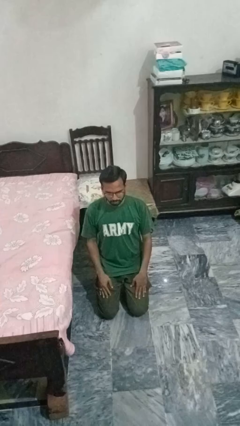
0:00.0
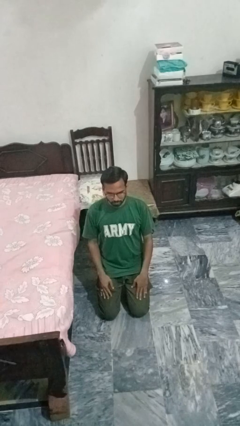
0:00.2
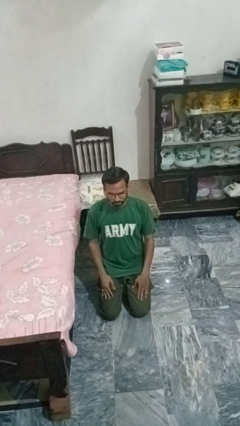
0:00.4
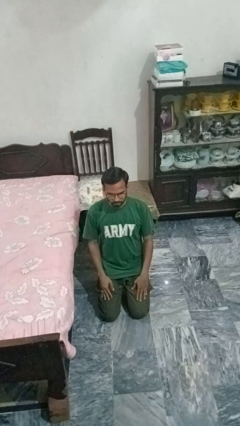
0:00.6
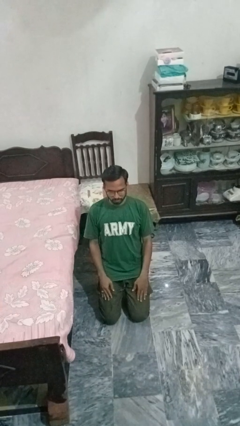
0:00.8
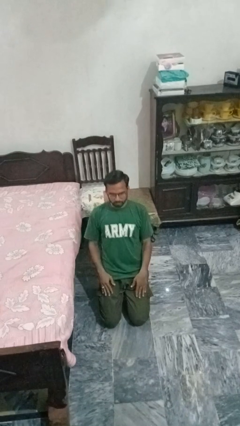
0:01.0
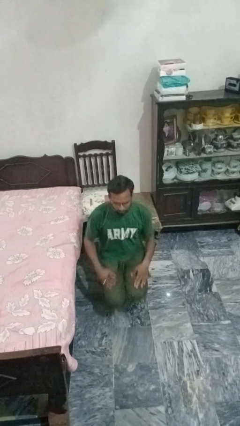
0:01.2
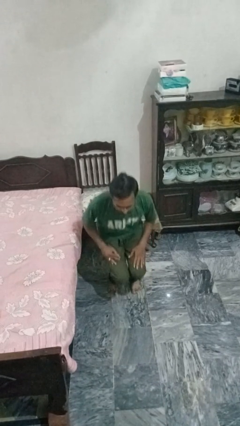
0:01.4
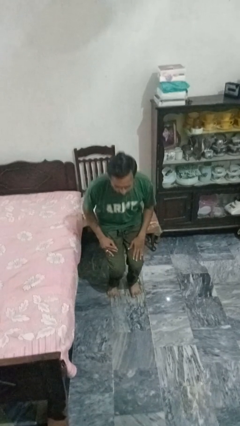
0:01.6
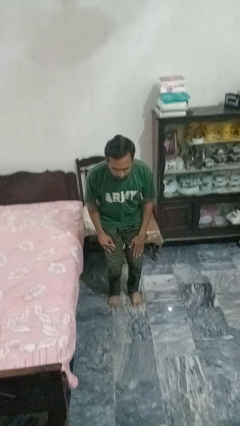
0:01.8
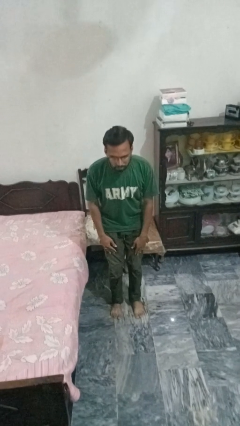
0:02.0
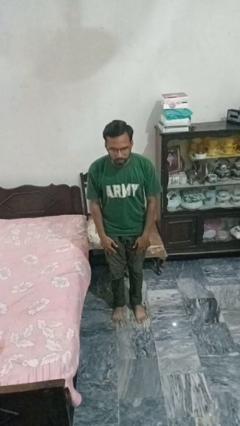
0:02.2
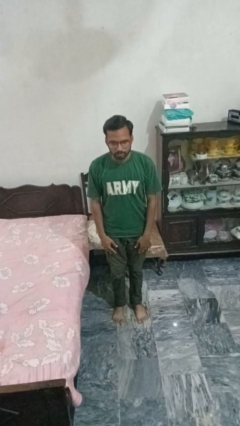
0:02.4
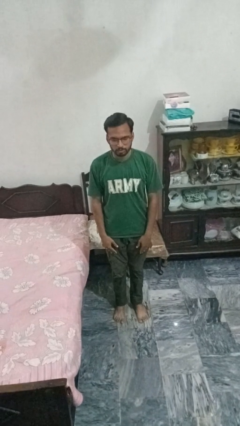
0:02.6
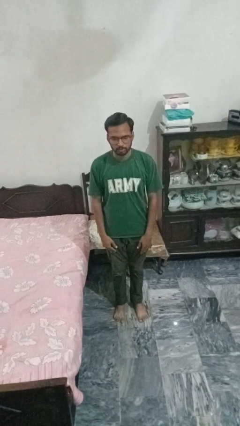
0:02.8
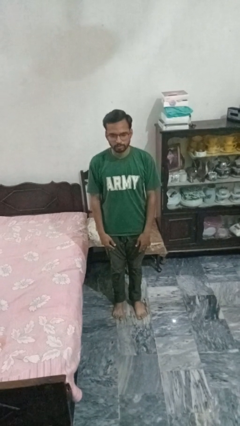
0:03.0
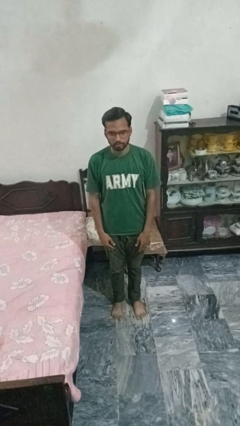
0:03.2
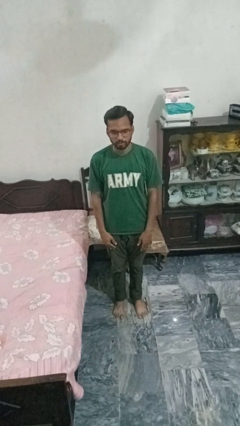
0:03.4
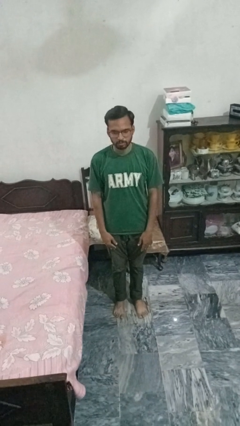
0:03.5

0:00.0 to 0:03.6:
person stands up from floor

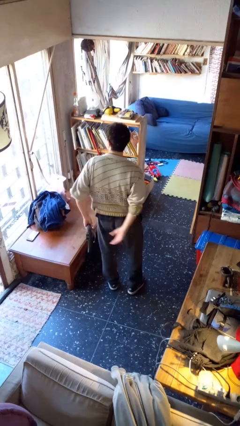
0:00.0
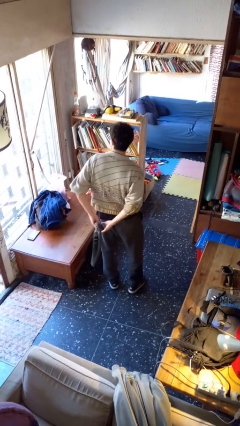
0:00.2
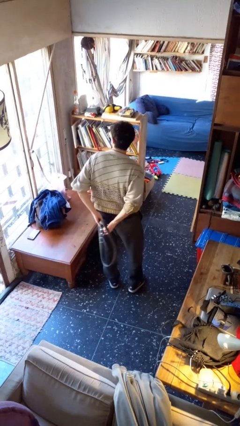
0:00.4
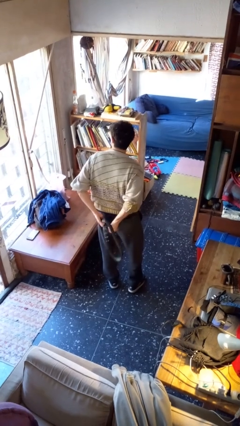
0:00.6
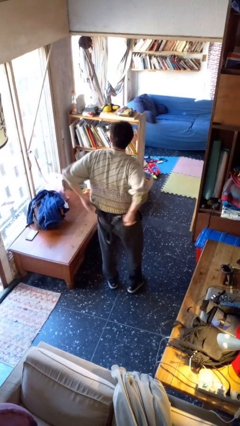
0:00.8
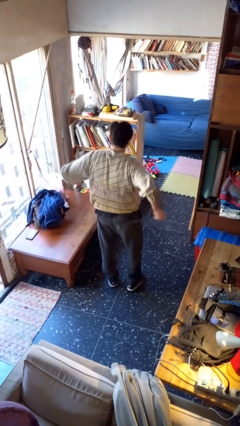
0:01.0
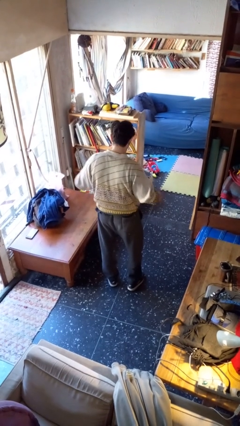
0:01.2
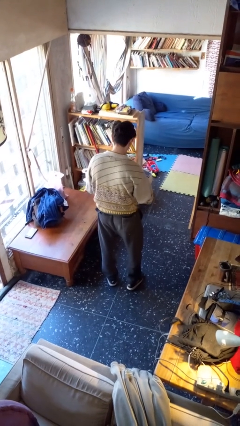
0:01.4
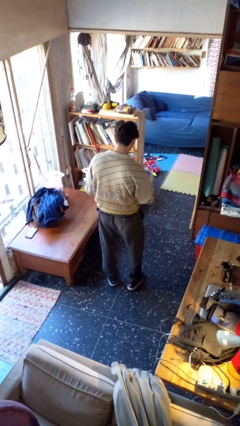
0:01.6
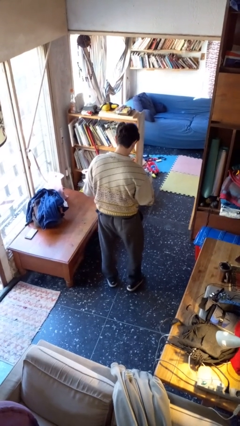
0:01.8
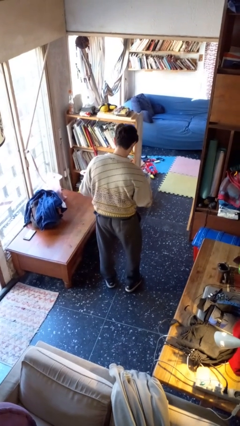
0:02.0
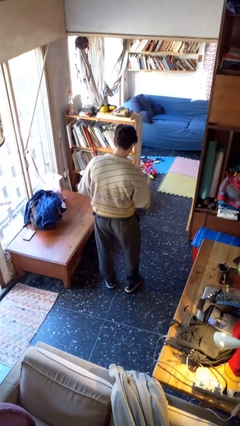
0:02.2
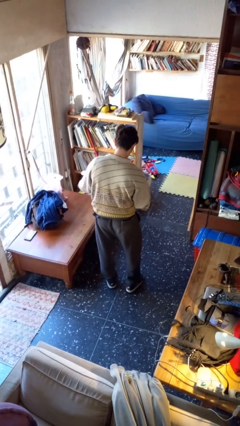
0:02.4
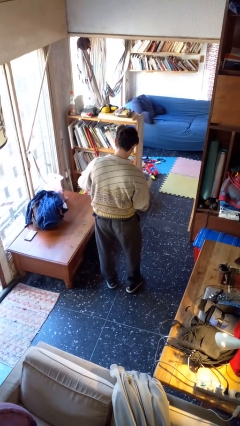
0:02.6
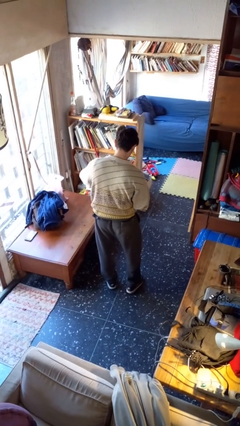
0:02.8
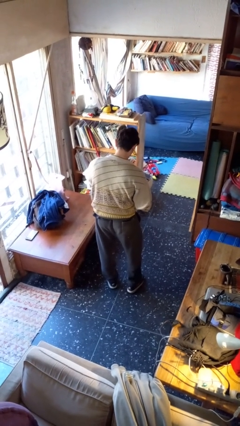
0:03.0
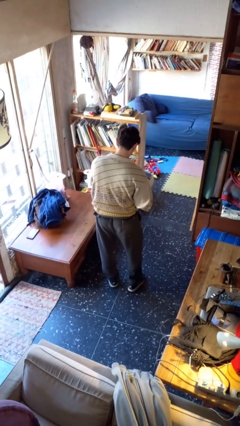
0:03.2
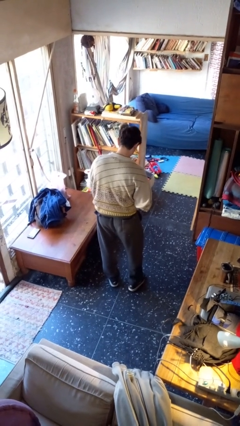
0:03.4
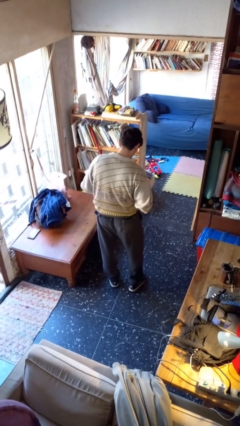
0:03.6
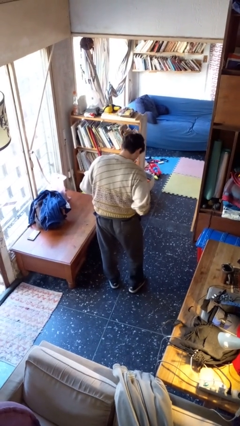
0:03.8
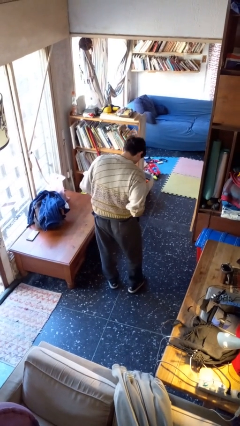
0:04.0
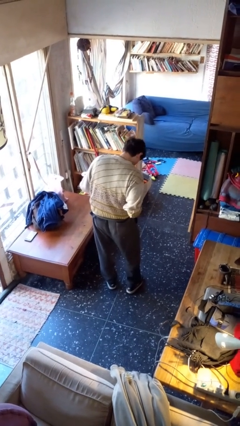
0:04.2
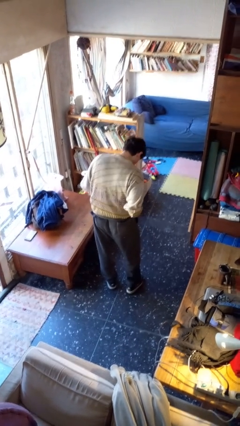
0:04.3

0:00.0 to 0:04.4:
person puts on belt

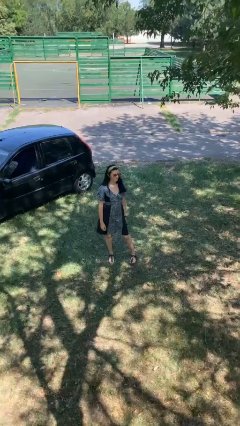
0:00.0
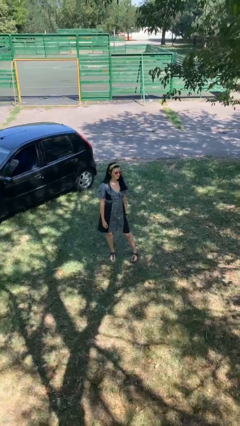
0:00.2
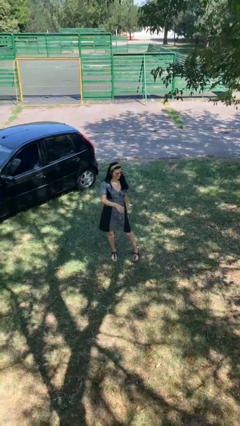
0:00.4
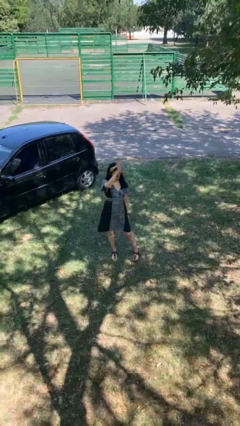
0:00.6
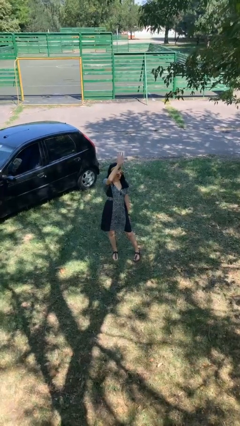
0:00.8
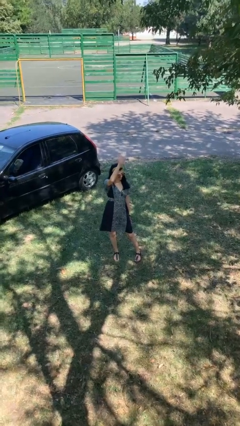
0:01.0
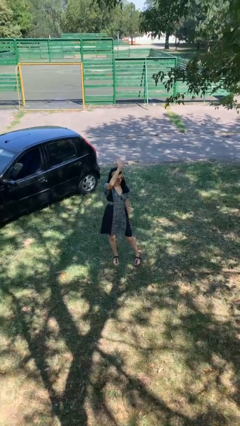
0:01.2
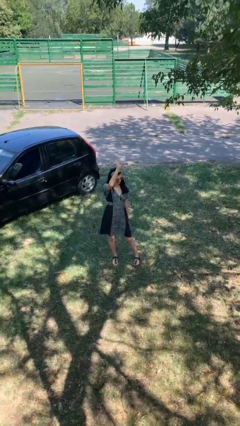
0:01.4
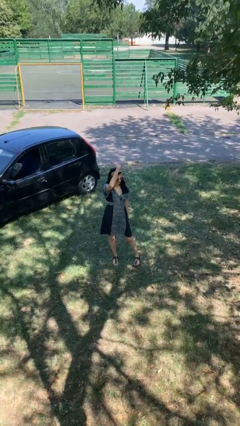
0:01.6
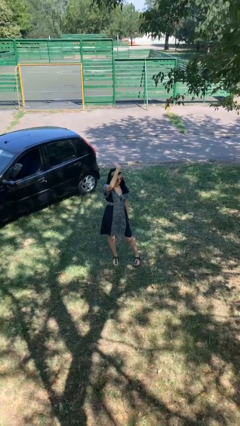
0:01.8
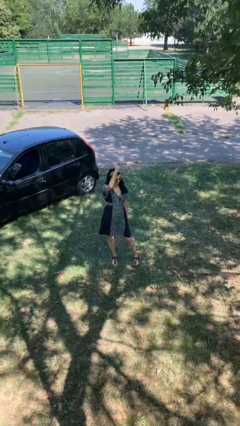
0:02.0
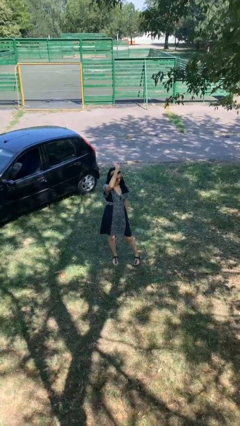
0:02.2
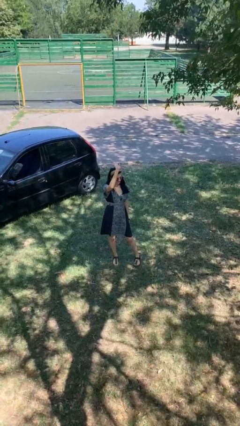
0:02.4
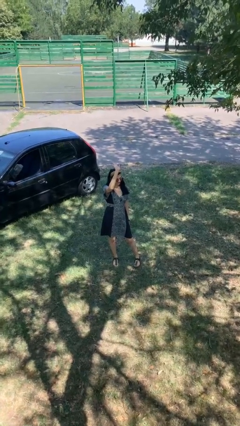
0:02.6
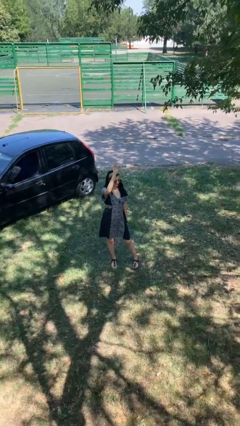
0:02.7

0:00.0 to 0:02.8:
person waves at person

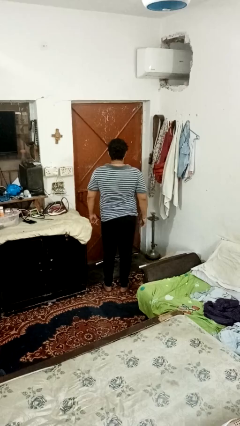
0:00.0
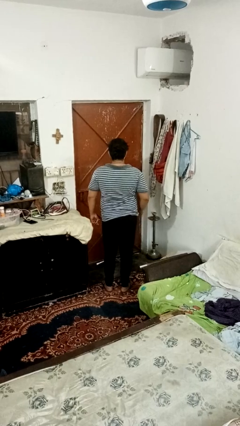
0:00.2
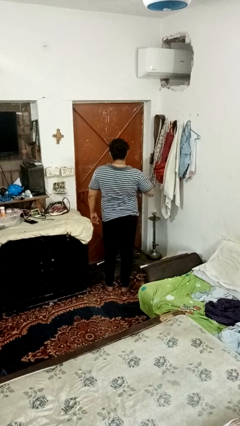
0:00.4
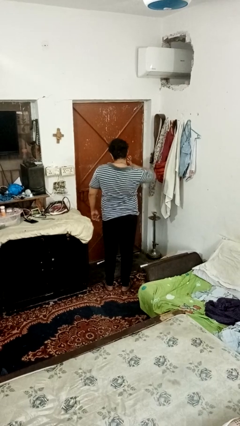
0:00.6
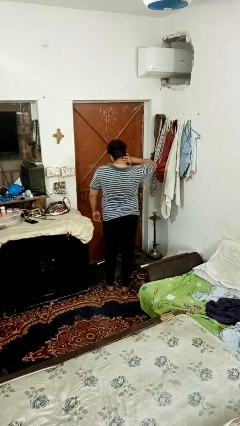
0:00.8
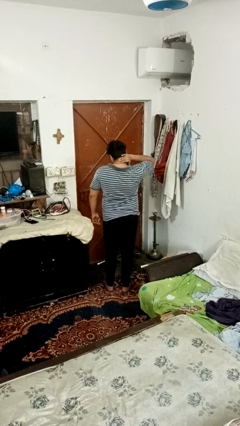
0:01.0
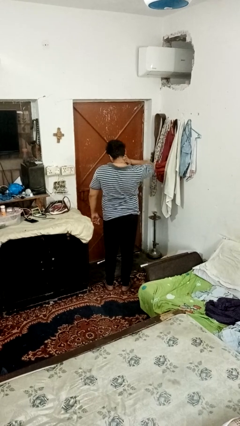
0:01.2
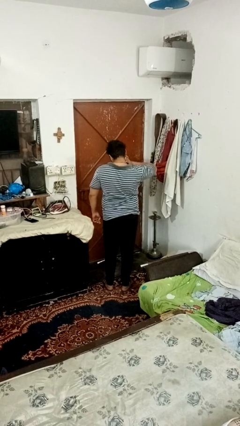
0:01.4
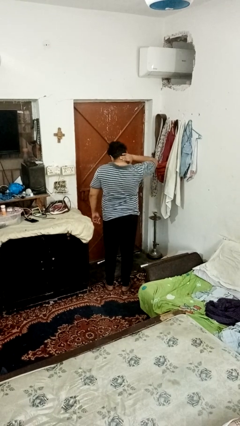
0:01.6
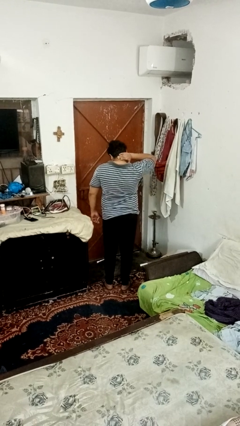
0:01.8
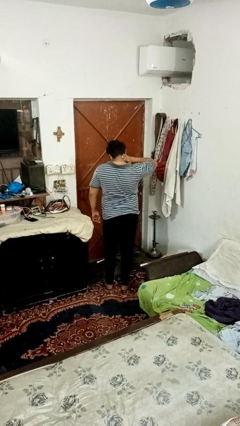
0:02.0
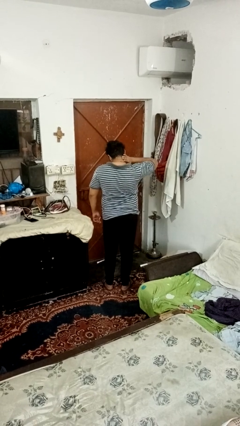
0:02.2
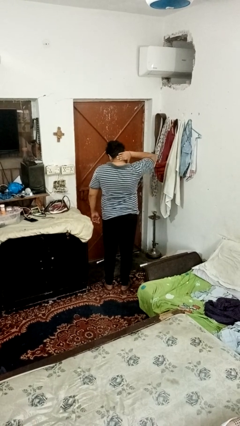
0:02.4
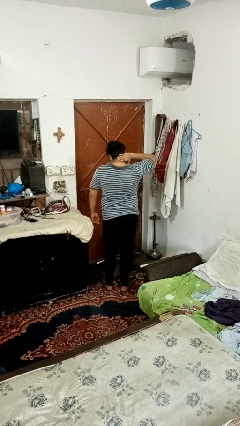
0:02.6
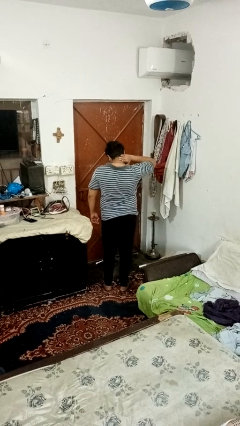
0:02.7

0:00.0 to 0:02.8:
person rubs neck

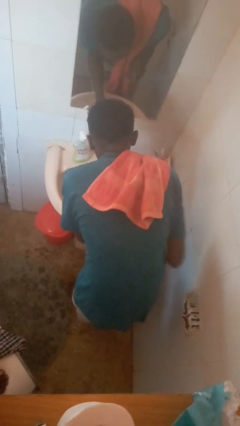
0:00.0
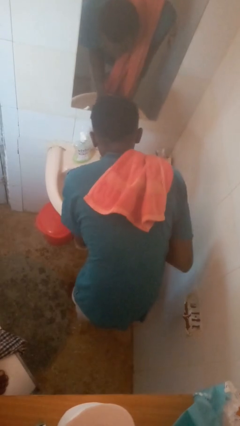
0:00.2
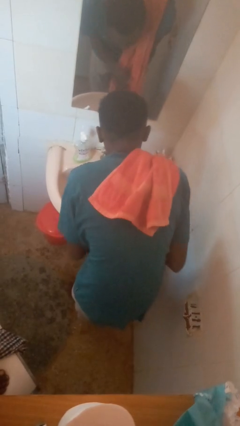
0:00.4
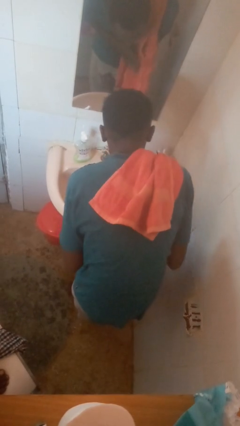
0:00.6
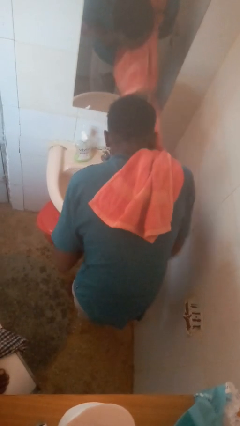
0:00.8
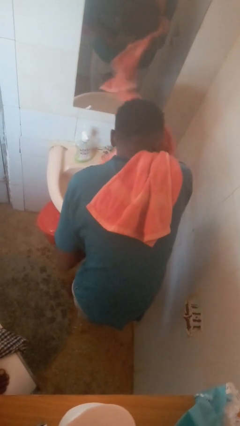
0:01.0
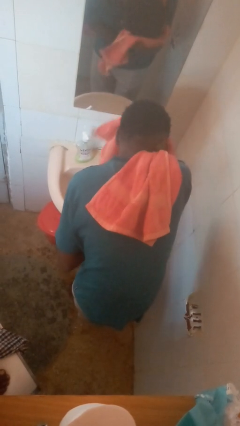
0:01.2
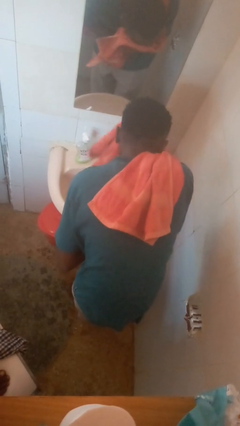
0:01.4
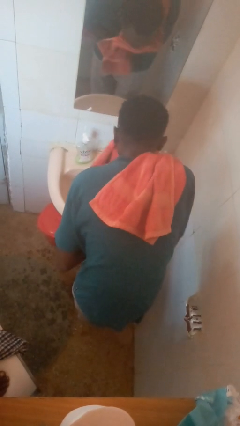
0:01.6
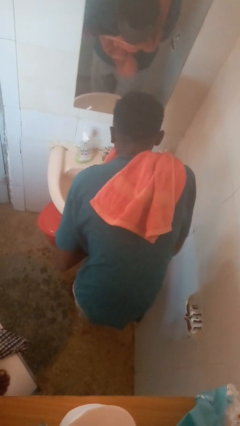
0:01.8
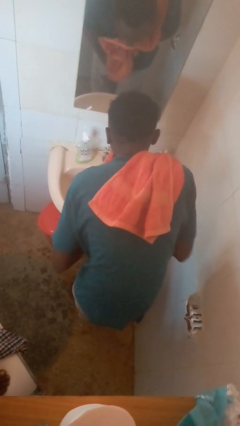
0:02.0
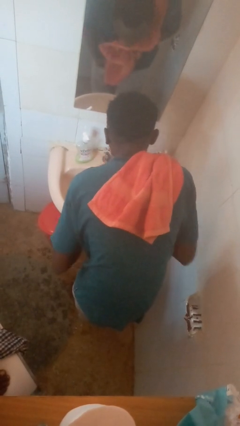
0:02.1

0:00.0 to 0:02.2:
person dries face with towel

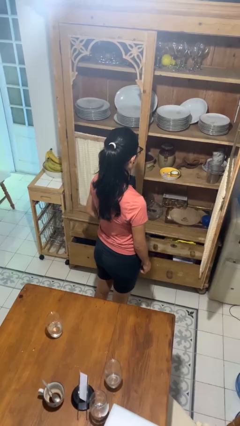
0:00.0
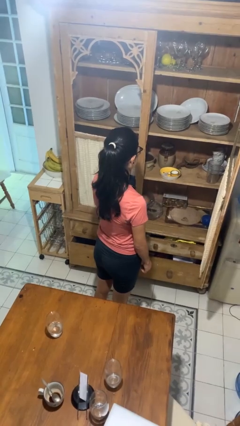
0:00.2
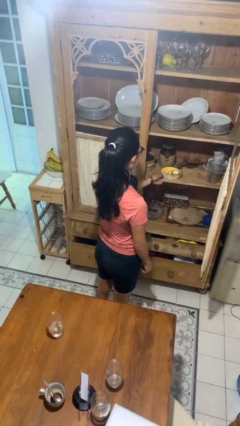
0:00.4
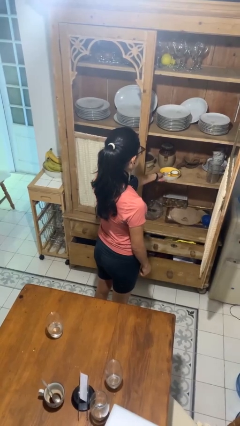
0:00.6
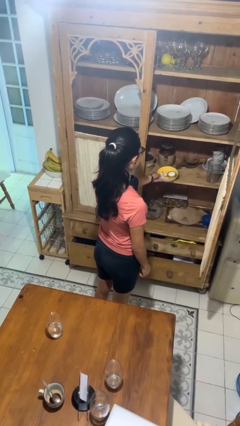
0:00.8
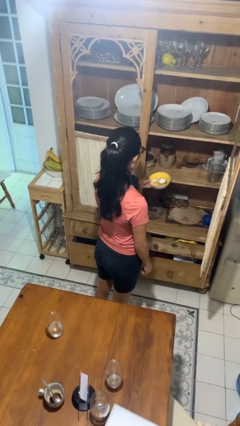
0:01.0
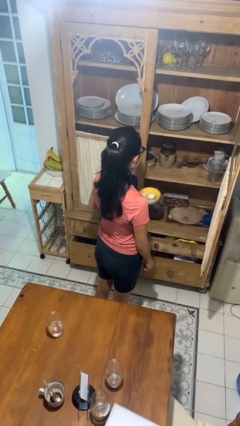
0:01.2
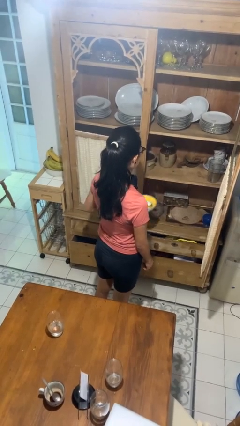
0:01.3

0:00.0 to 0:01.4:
person takes object from cabinet
